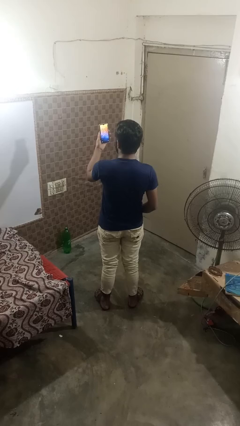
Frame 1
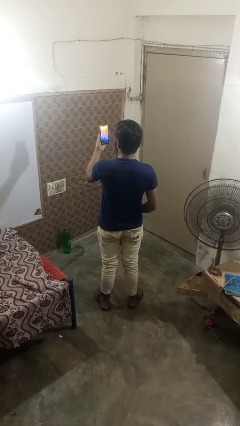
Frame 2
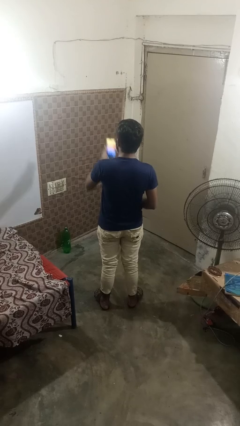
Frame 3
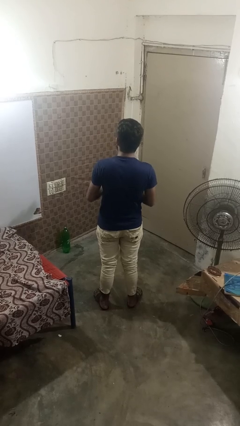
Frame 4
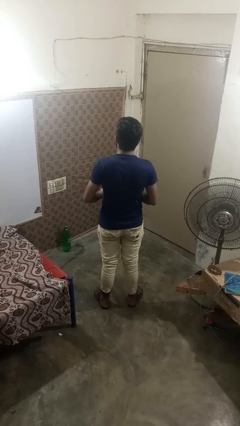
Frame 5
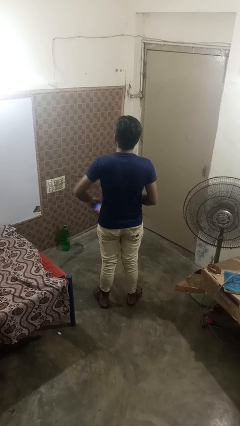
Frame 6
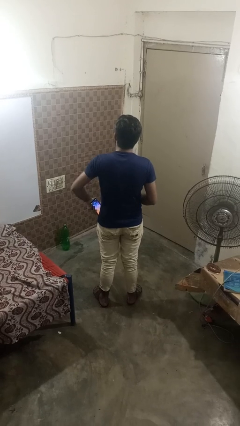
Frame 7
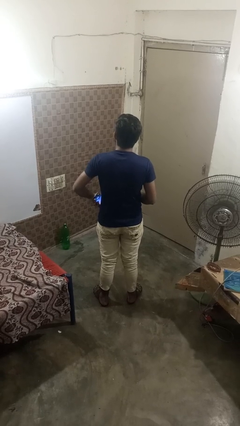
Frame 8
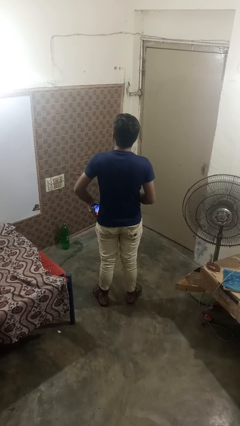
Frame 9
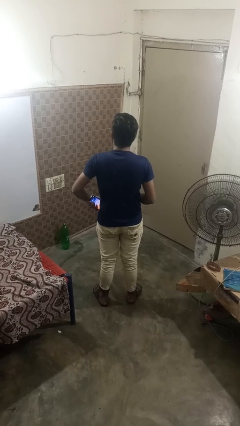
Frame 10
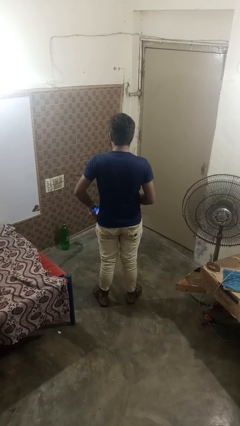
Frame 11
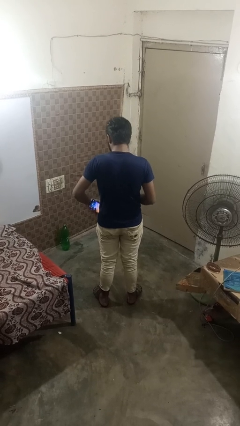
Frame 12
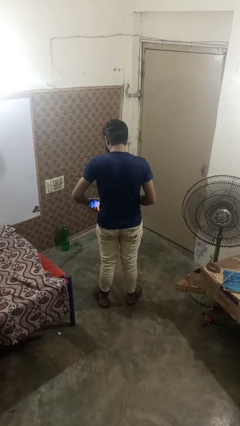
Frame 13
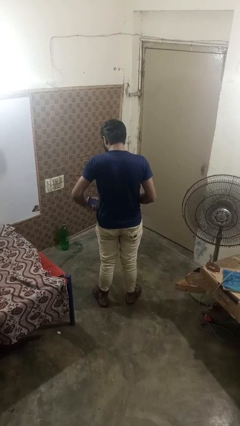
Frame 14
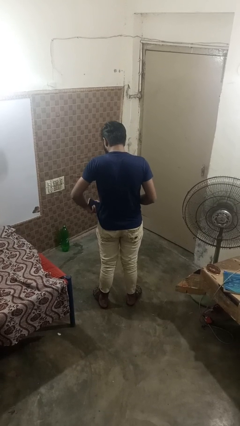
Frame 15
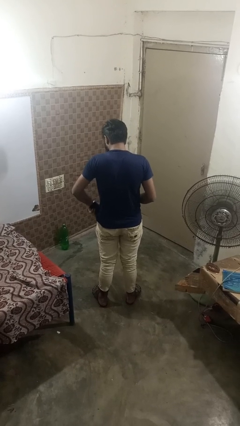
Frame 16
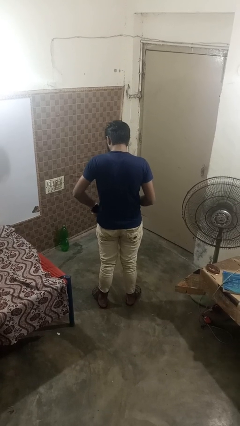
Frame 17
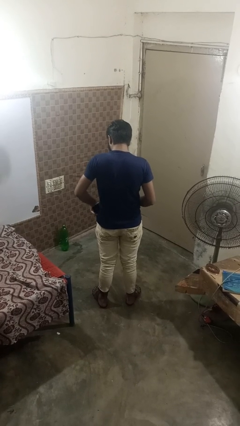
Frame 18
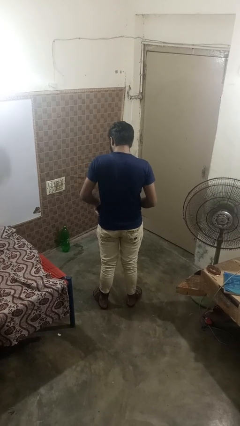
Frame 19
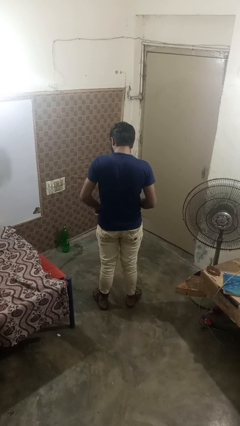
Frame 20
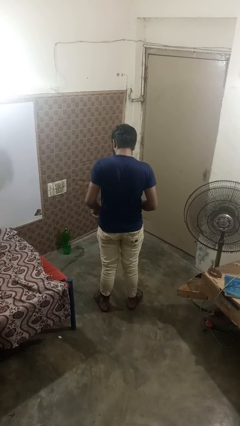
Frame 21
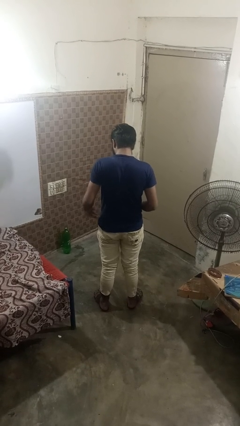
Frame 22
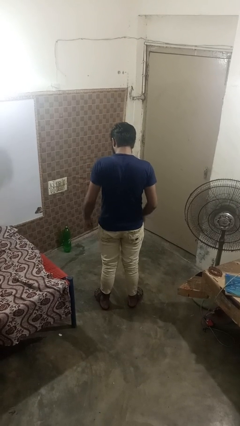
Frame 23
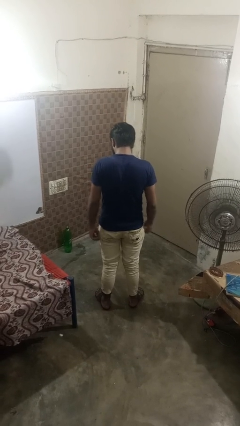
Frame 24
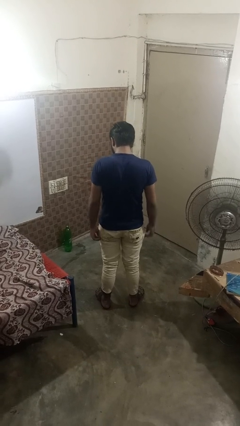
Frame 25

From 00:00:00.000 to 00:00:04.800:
person puts phone into pocket

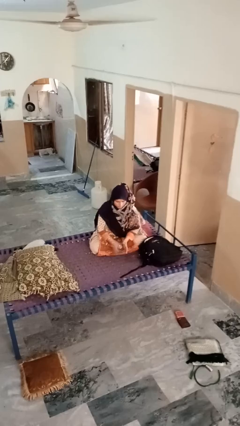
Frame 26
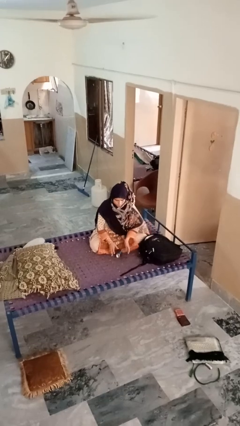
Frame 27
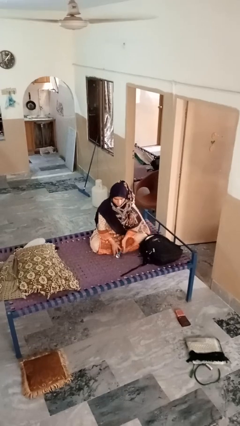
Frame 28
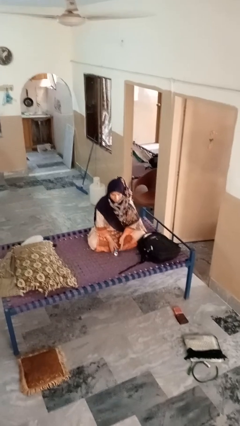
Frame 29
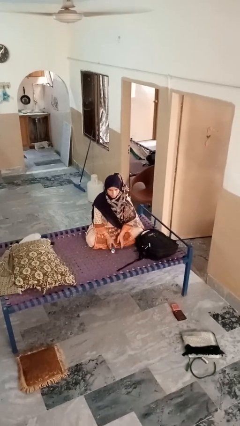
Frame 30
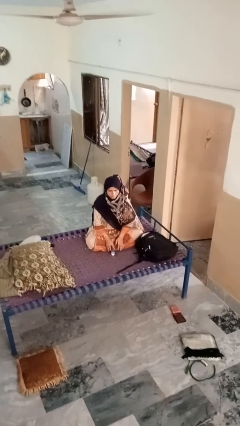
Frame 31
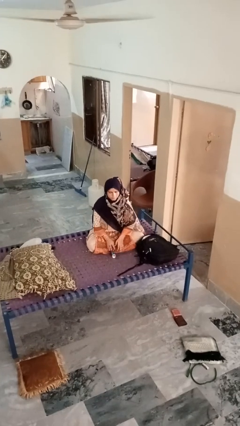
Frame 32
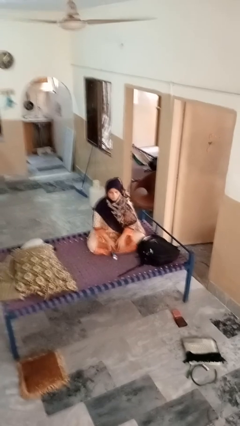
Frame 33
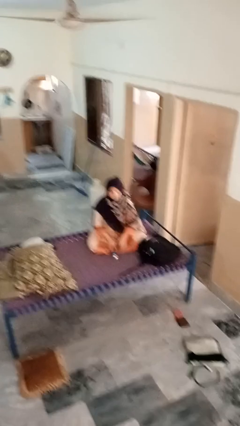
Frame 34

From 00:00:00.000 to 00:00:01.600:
person catches dropped object

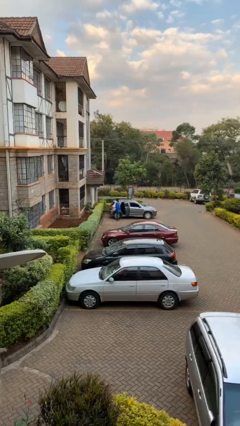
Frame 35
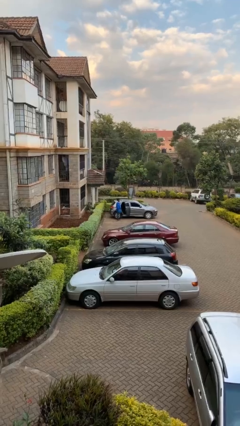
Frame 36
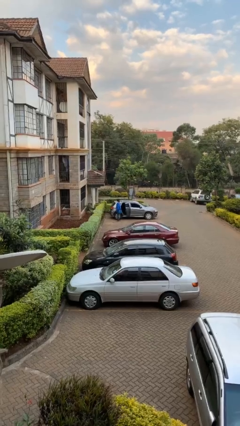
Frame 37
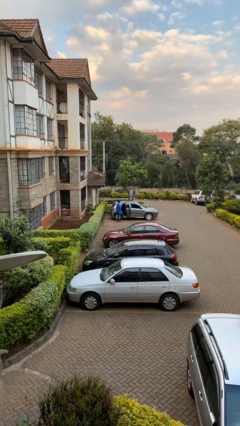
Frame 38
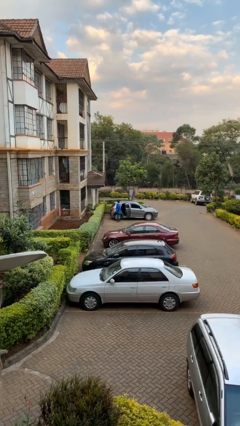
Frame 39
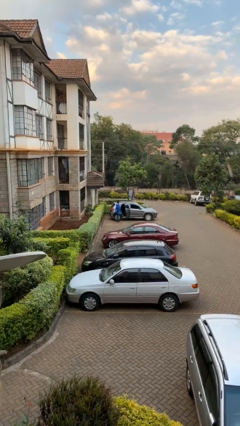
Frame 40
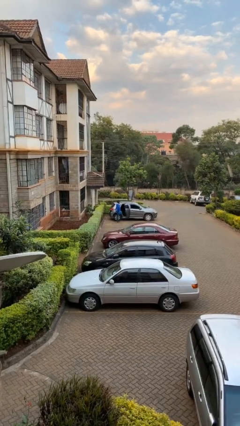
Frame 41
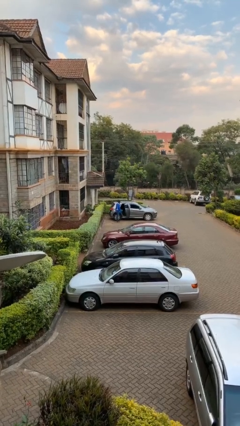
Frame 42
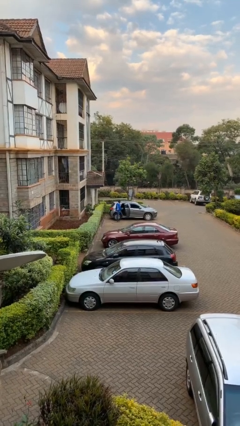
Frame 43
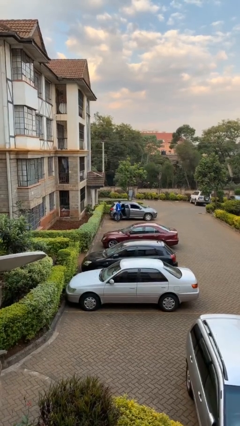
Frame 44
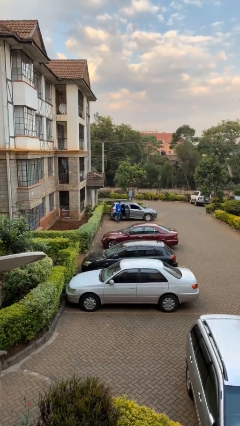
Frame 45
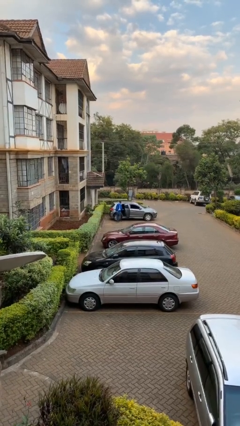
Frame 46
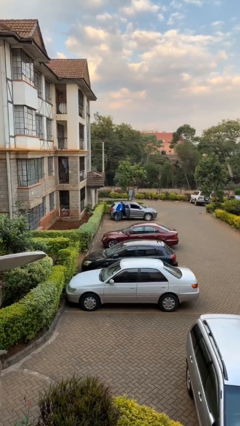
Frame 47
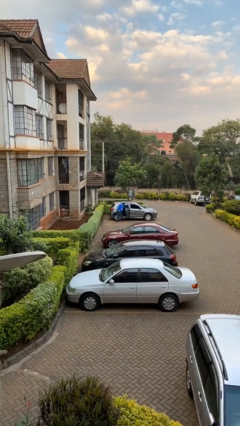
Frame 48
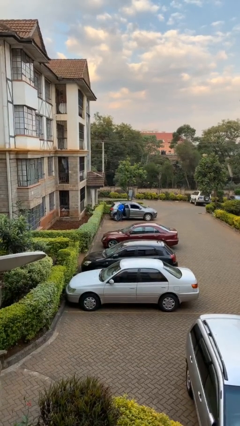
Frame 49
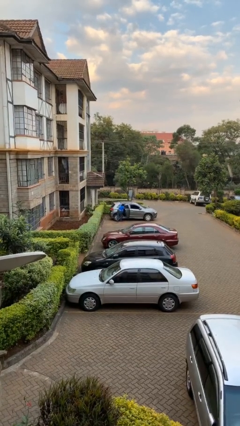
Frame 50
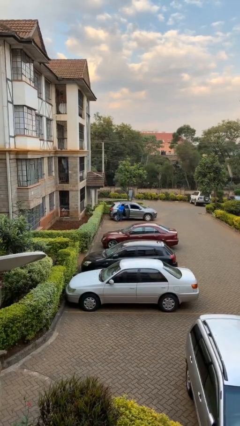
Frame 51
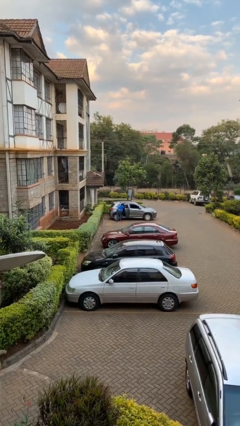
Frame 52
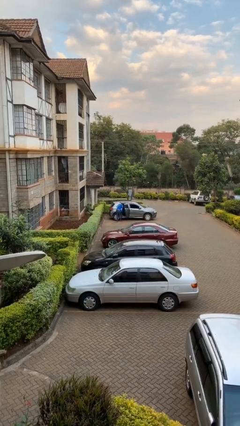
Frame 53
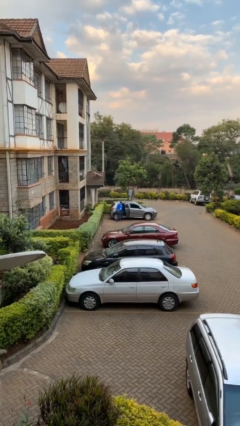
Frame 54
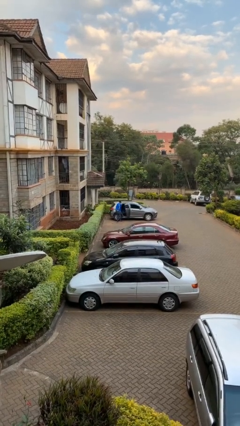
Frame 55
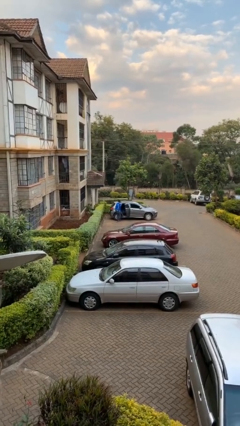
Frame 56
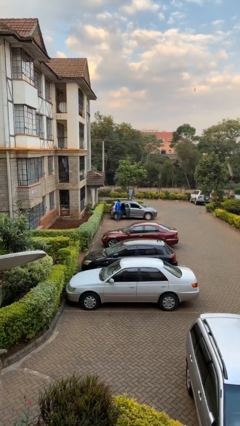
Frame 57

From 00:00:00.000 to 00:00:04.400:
person loads car

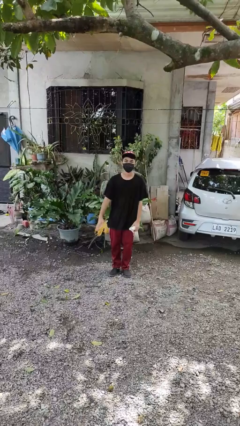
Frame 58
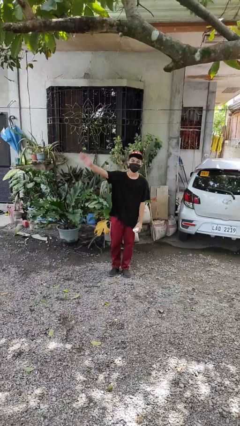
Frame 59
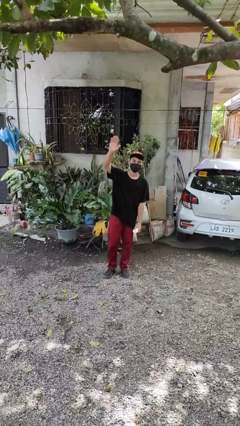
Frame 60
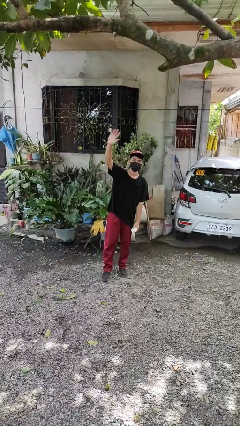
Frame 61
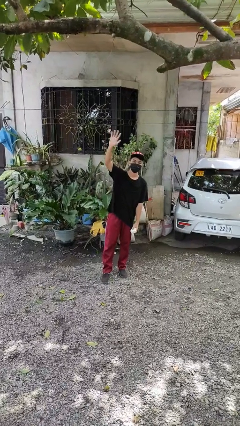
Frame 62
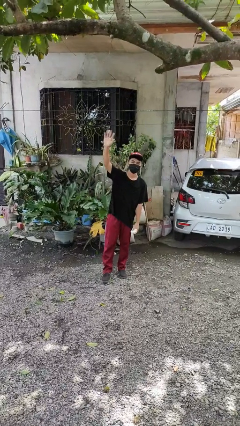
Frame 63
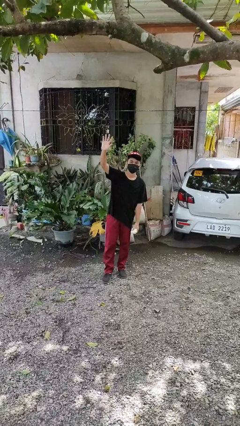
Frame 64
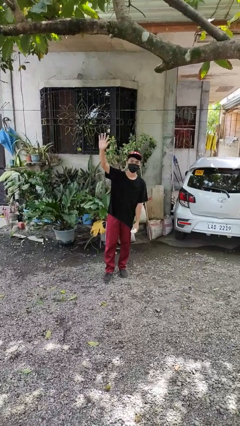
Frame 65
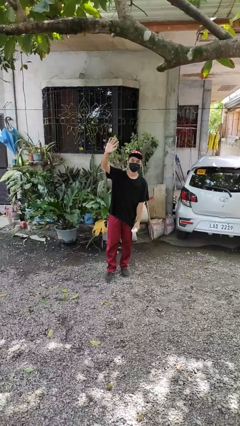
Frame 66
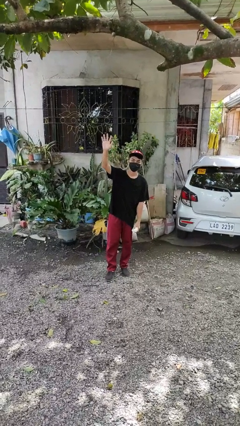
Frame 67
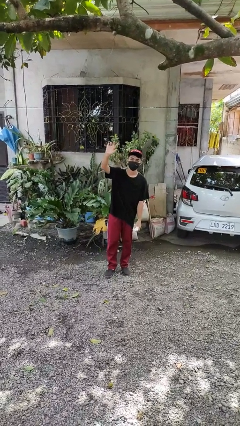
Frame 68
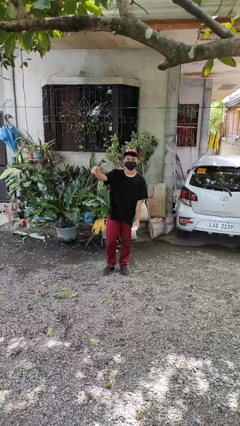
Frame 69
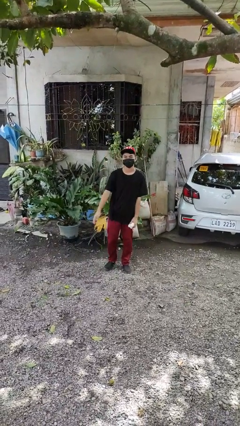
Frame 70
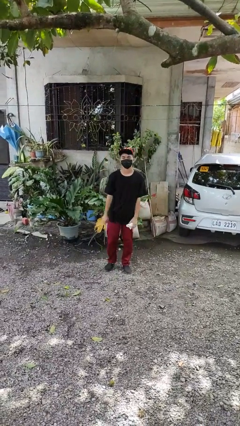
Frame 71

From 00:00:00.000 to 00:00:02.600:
person waves at person

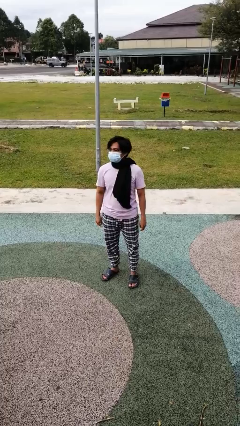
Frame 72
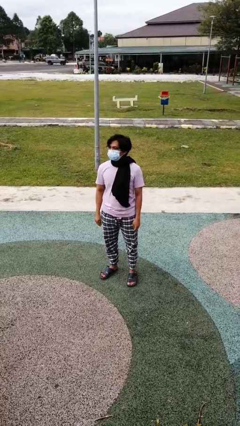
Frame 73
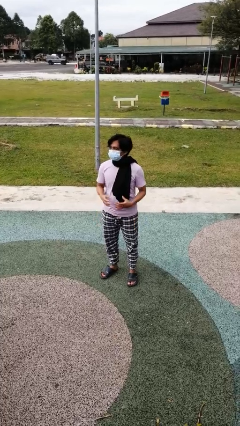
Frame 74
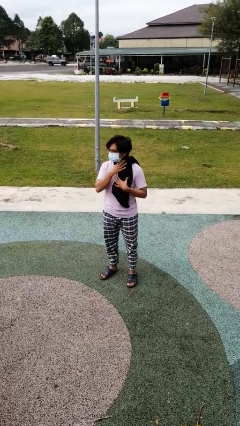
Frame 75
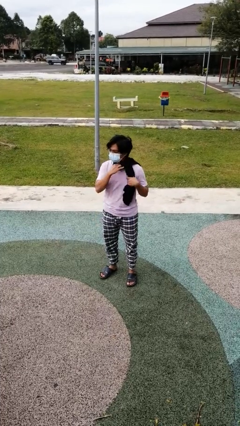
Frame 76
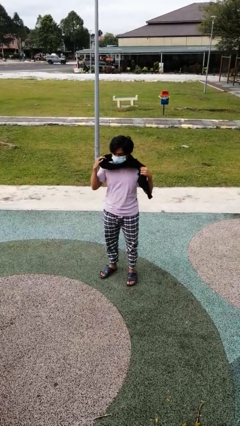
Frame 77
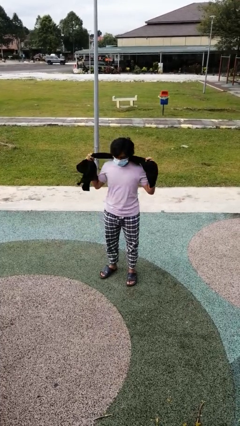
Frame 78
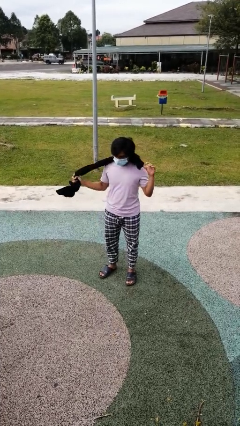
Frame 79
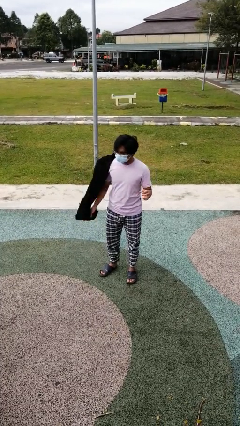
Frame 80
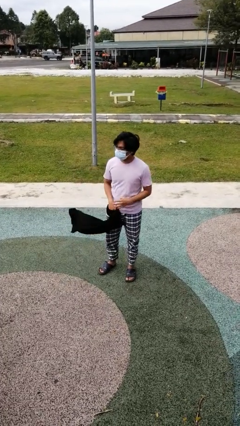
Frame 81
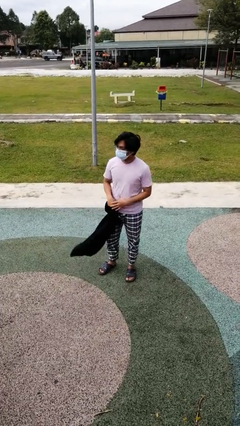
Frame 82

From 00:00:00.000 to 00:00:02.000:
person takes off scarf

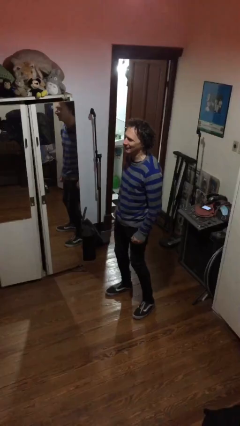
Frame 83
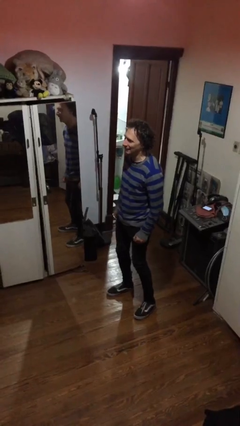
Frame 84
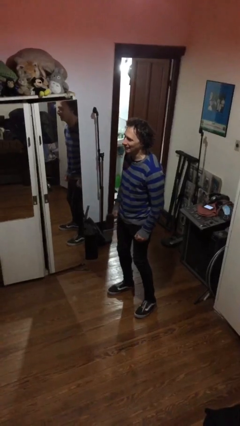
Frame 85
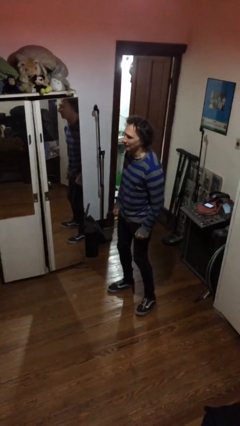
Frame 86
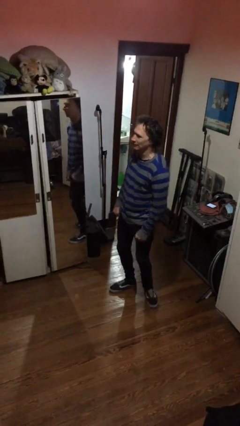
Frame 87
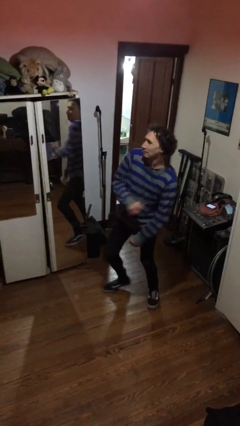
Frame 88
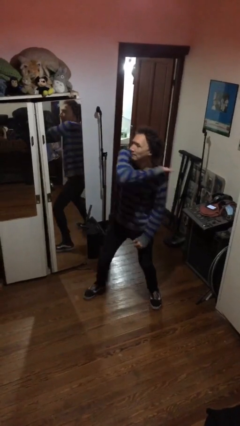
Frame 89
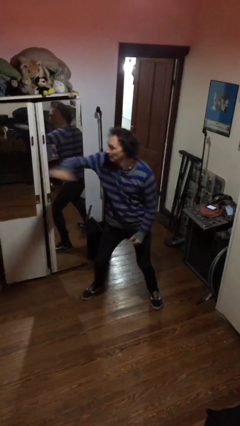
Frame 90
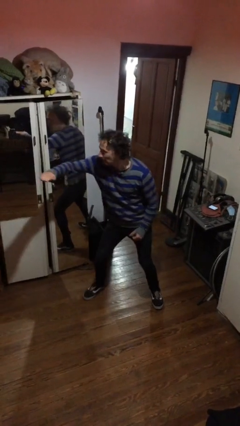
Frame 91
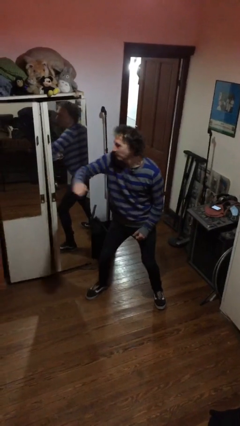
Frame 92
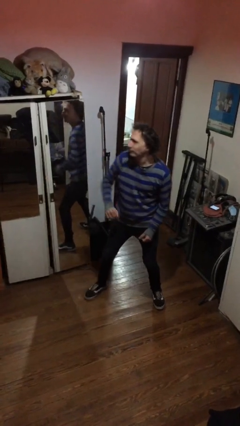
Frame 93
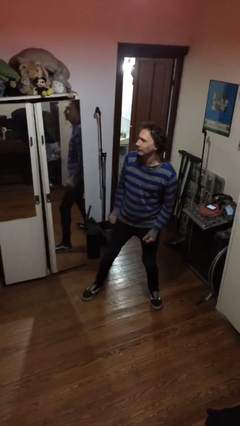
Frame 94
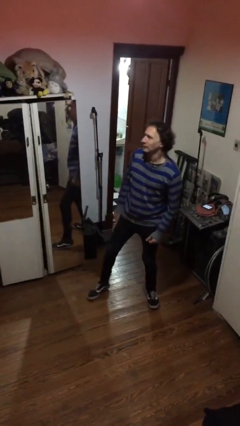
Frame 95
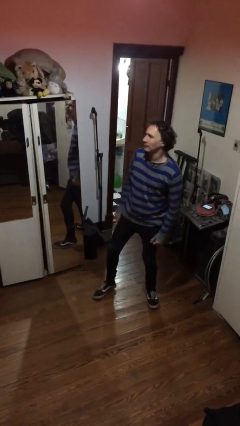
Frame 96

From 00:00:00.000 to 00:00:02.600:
person karate chop
